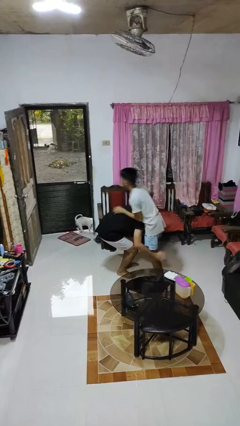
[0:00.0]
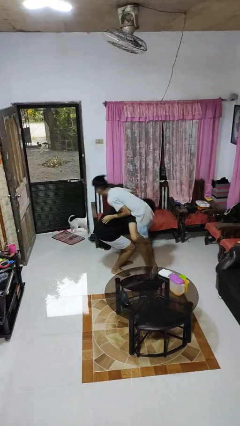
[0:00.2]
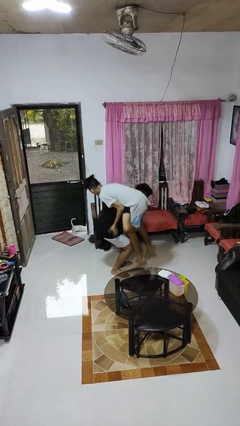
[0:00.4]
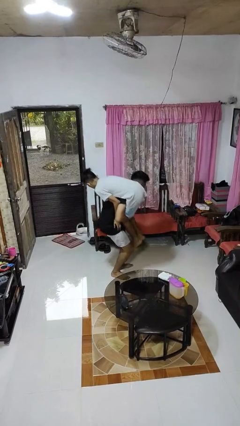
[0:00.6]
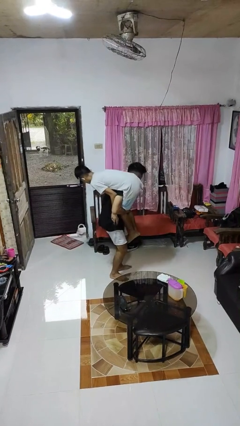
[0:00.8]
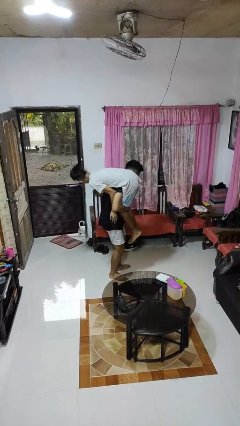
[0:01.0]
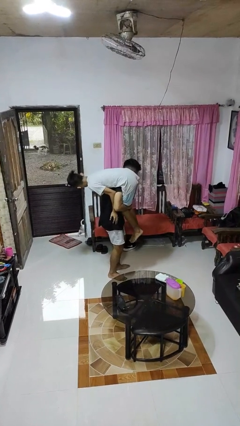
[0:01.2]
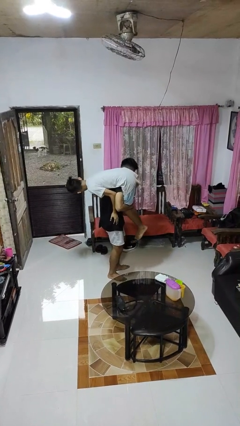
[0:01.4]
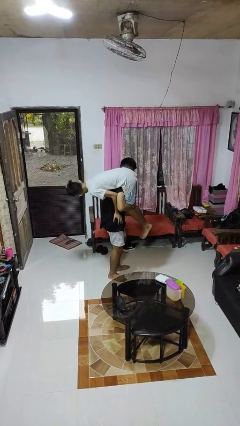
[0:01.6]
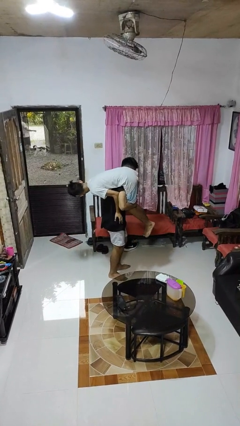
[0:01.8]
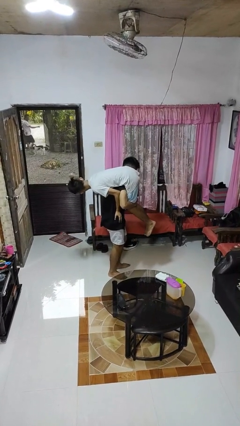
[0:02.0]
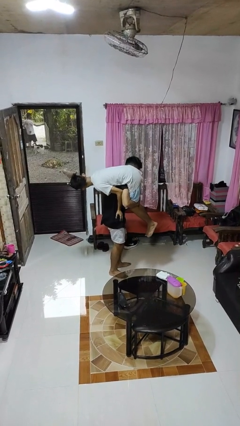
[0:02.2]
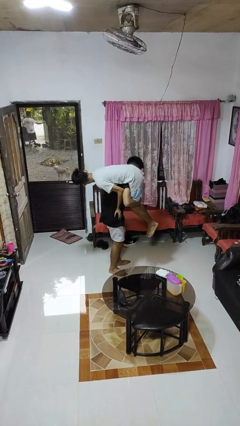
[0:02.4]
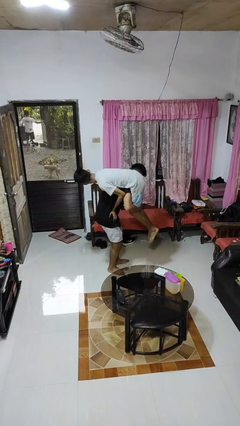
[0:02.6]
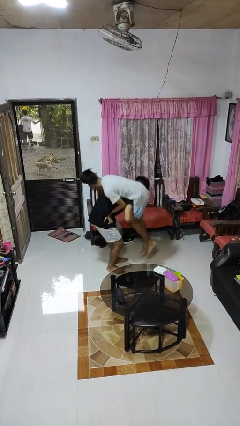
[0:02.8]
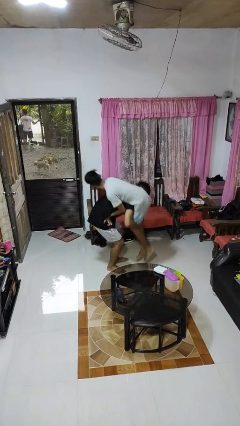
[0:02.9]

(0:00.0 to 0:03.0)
person carries person over shoulder

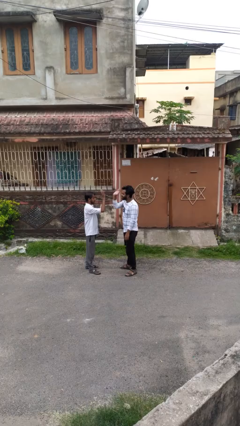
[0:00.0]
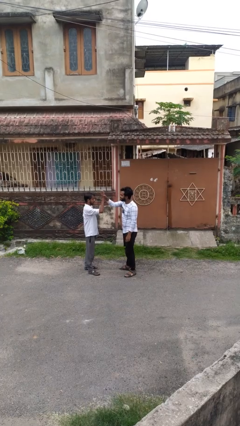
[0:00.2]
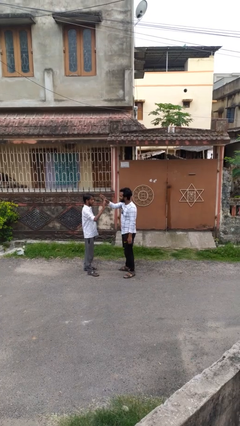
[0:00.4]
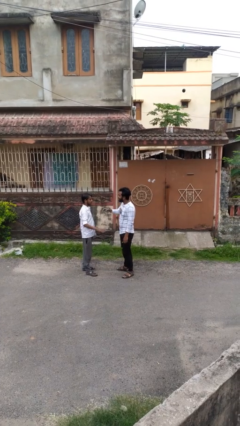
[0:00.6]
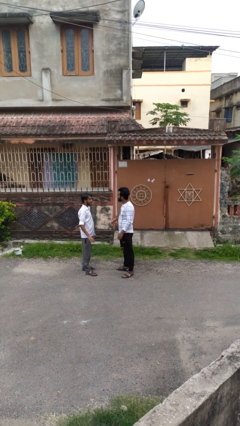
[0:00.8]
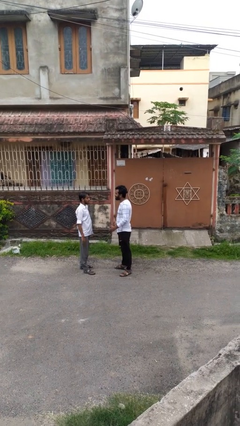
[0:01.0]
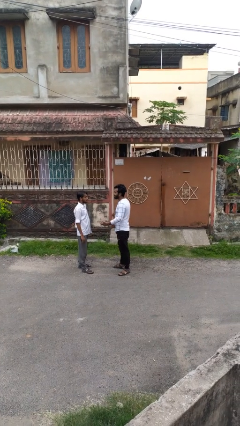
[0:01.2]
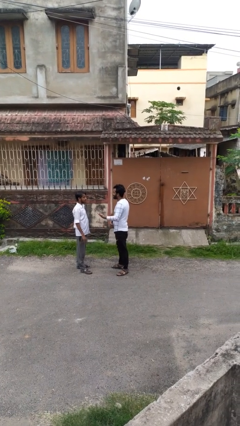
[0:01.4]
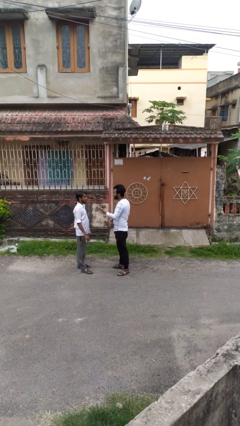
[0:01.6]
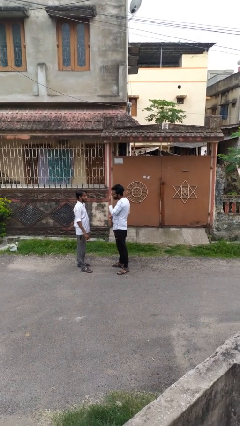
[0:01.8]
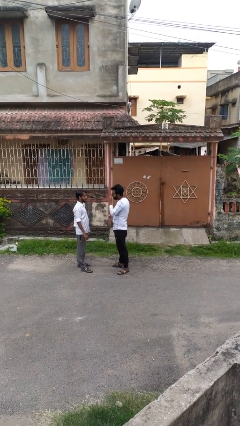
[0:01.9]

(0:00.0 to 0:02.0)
person highfives hand

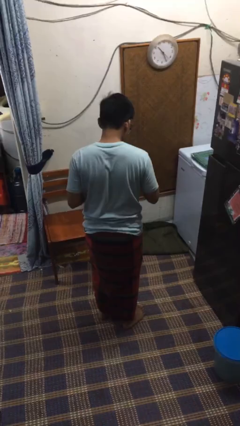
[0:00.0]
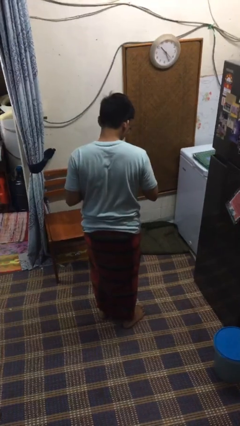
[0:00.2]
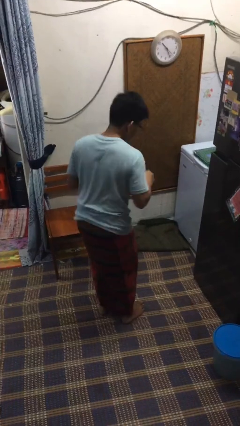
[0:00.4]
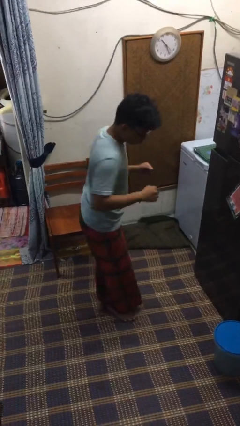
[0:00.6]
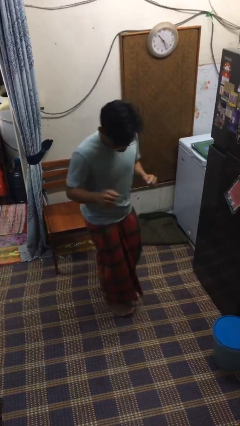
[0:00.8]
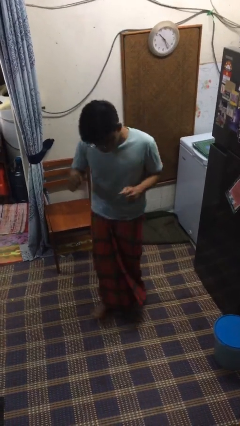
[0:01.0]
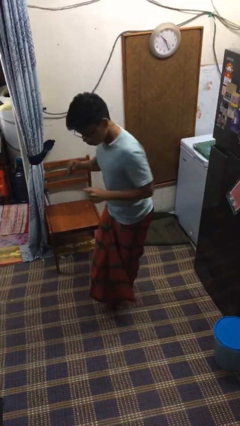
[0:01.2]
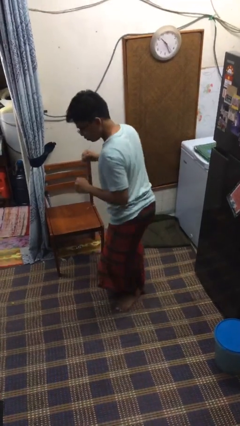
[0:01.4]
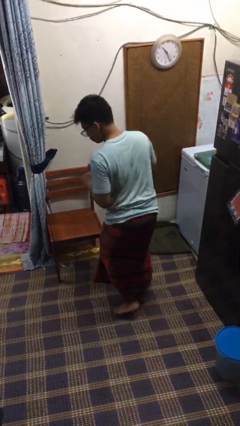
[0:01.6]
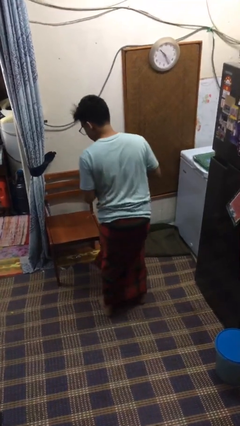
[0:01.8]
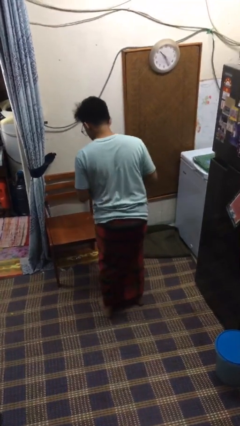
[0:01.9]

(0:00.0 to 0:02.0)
person twirls

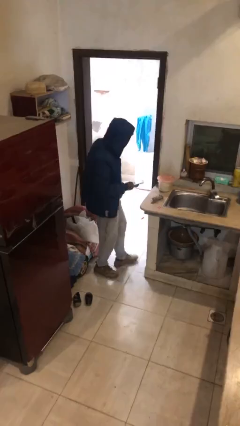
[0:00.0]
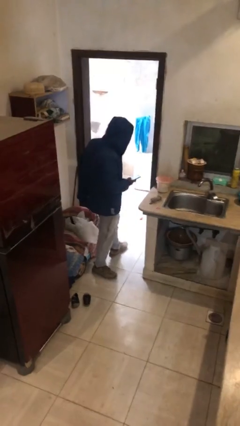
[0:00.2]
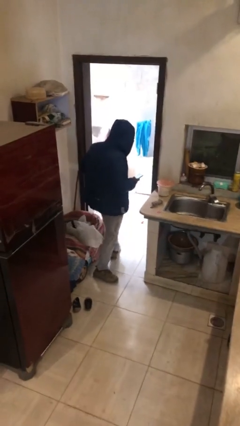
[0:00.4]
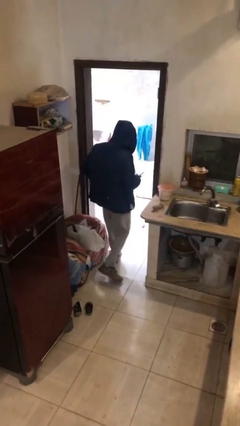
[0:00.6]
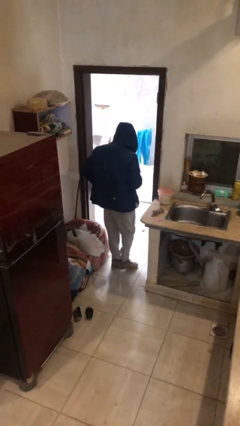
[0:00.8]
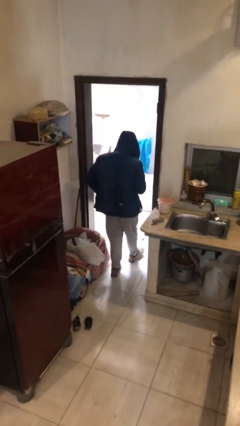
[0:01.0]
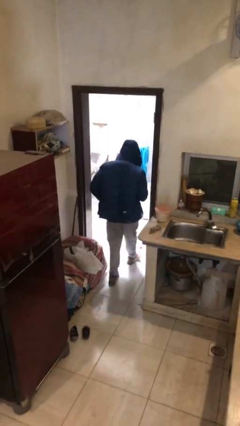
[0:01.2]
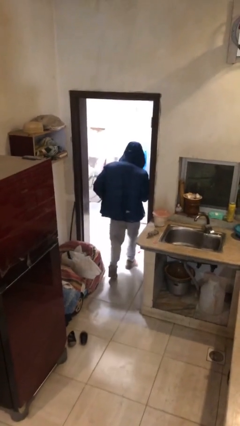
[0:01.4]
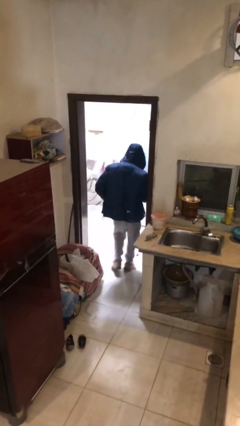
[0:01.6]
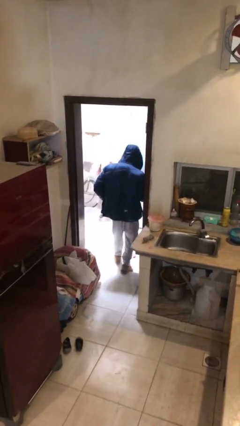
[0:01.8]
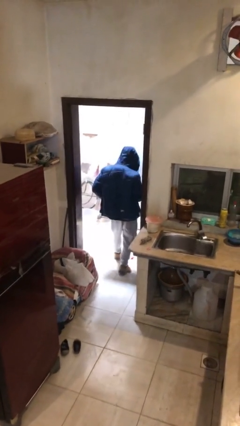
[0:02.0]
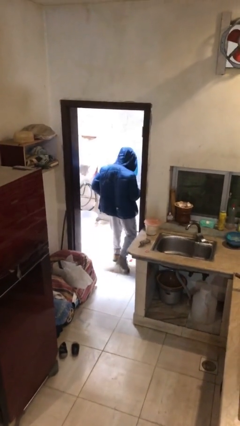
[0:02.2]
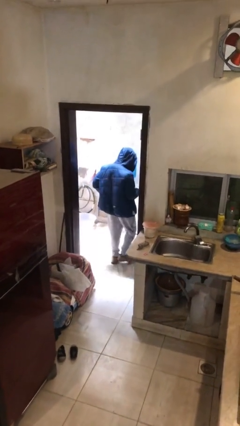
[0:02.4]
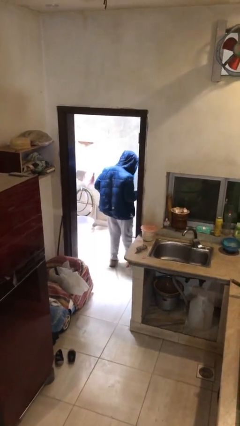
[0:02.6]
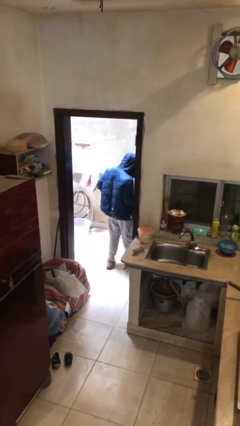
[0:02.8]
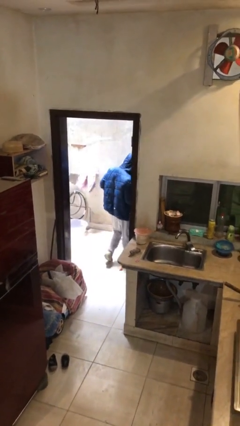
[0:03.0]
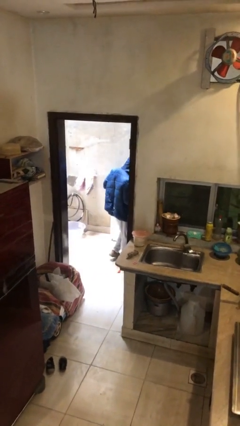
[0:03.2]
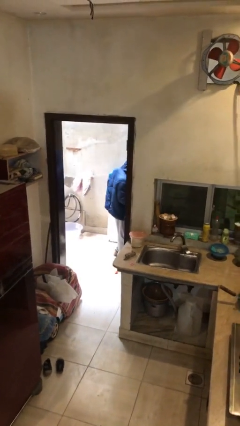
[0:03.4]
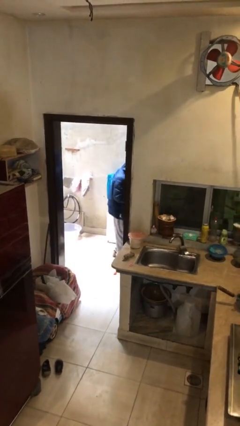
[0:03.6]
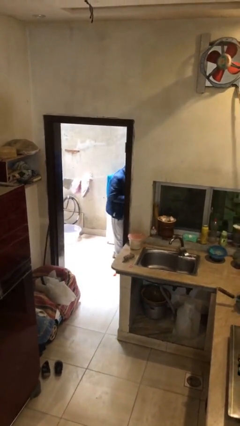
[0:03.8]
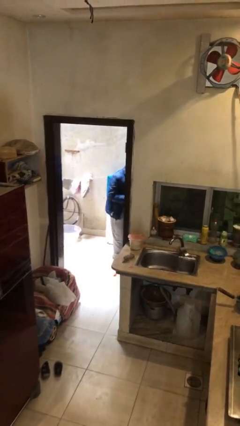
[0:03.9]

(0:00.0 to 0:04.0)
person exits scene through structure

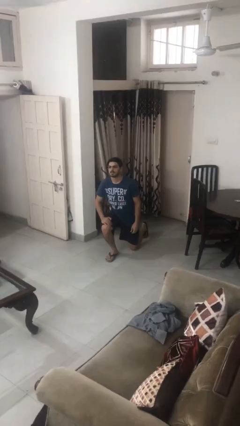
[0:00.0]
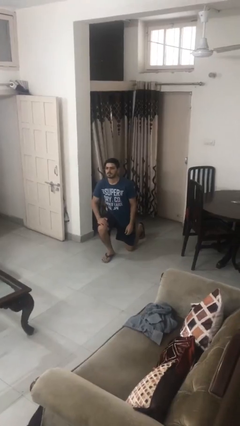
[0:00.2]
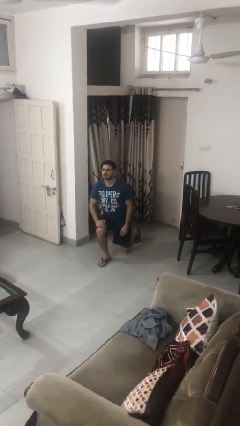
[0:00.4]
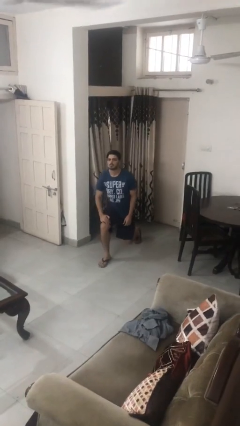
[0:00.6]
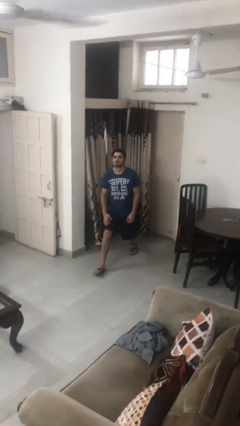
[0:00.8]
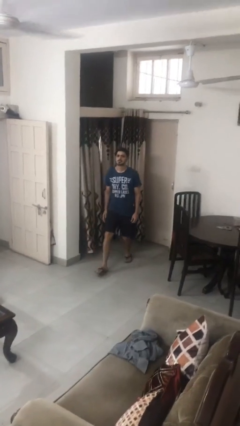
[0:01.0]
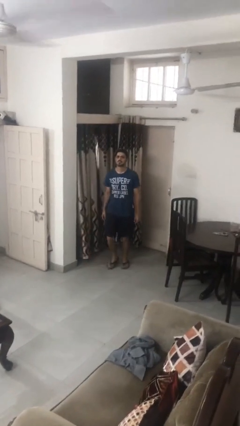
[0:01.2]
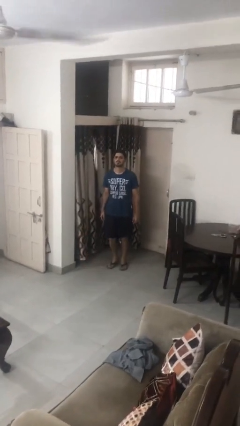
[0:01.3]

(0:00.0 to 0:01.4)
person stands up from floor

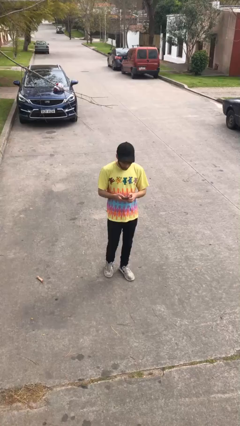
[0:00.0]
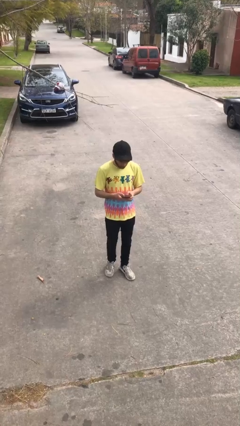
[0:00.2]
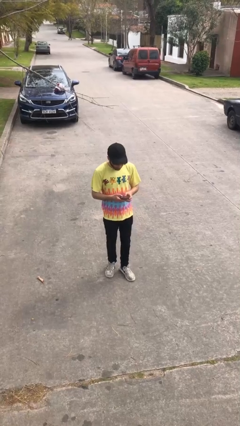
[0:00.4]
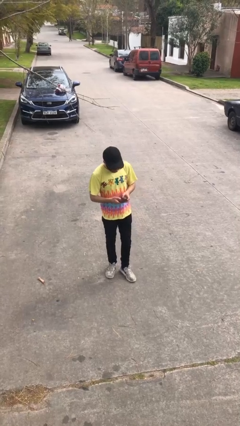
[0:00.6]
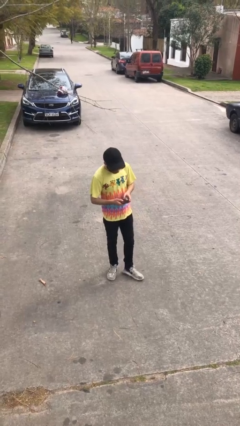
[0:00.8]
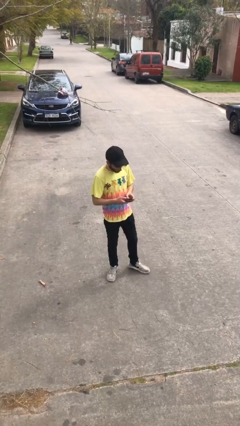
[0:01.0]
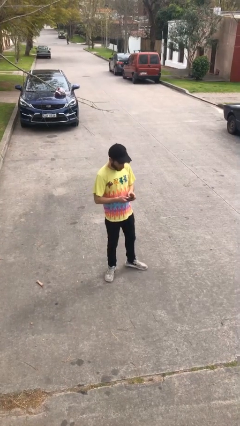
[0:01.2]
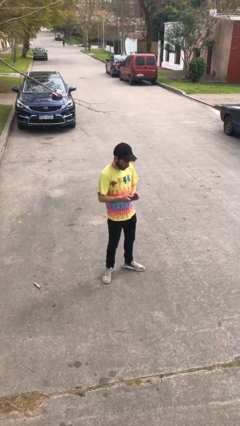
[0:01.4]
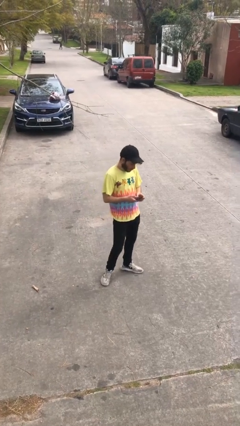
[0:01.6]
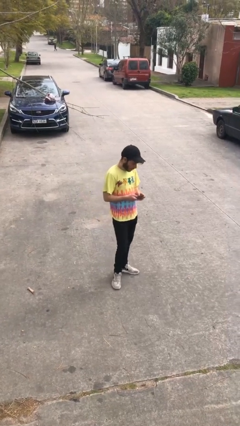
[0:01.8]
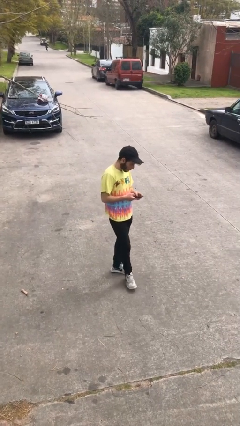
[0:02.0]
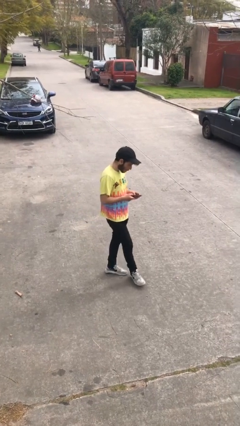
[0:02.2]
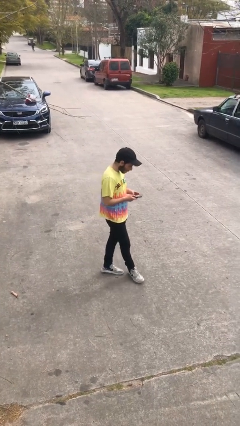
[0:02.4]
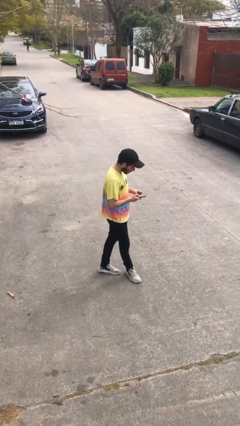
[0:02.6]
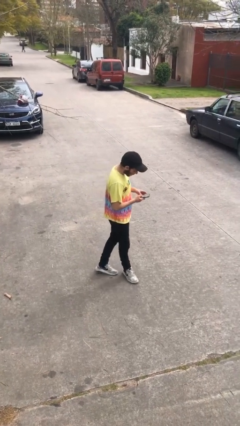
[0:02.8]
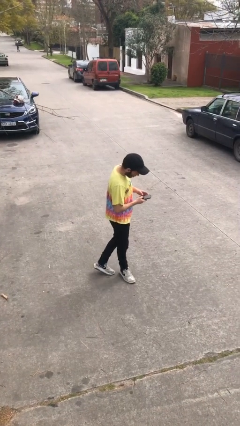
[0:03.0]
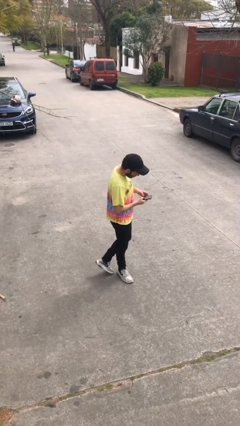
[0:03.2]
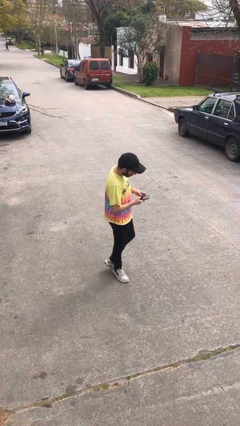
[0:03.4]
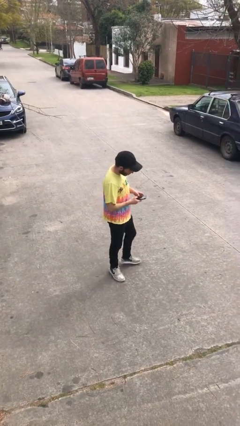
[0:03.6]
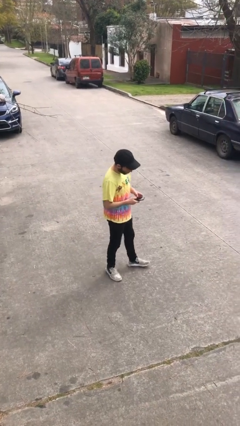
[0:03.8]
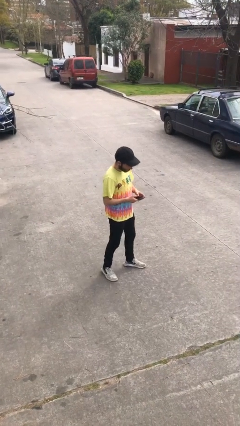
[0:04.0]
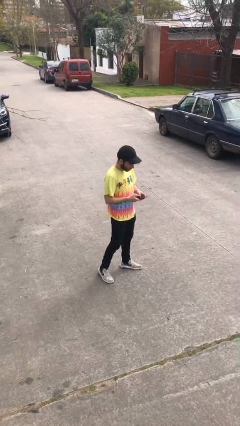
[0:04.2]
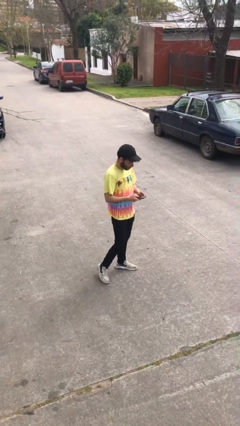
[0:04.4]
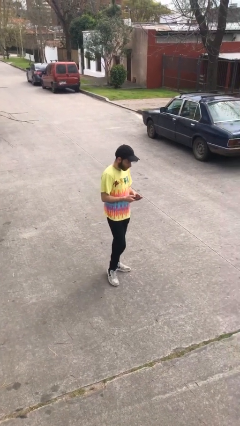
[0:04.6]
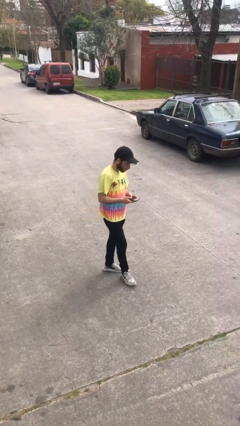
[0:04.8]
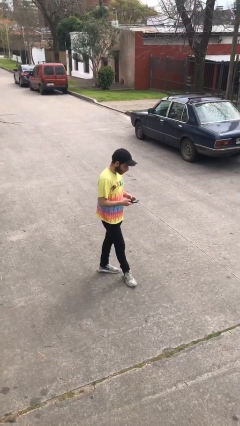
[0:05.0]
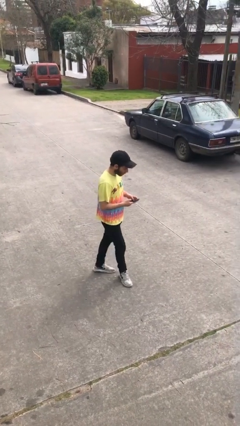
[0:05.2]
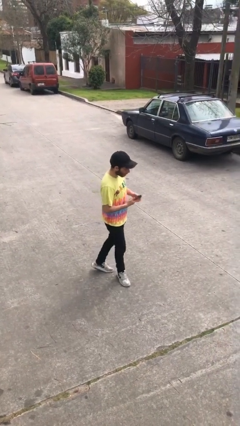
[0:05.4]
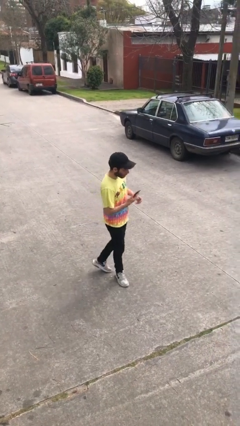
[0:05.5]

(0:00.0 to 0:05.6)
person texts on phone
